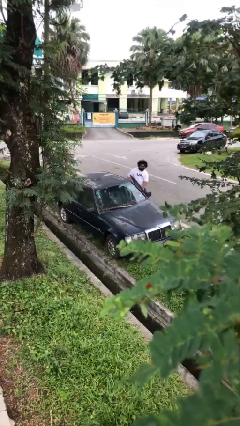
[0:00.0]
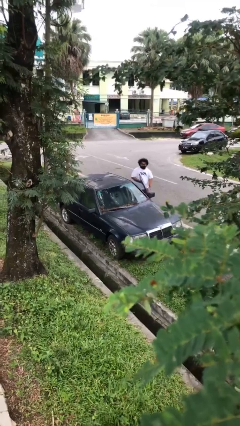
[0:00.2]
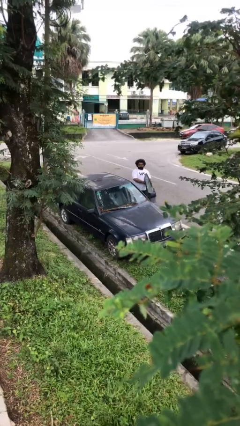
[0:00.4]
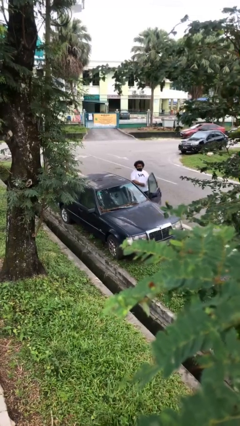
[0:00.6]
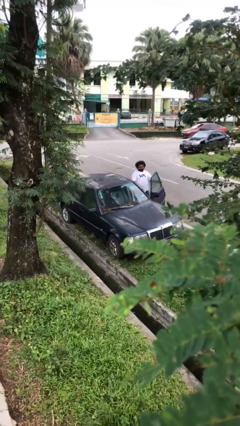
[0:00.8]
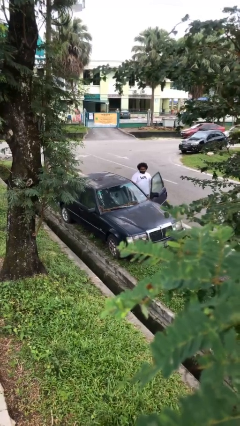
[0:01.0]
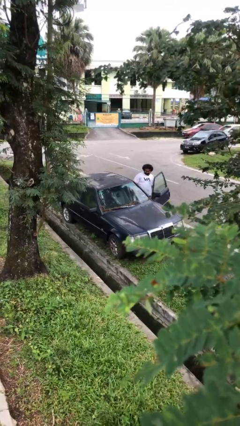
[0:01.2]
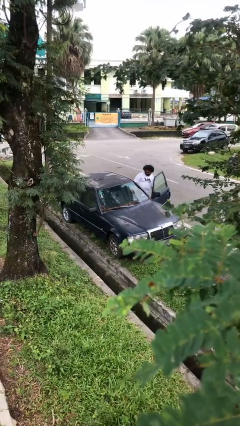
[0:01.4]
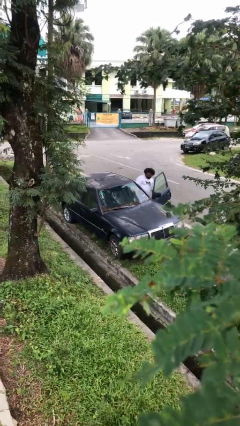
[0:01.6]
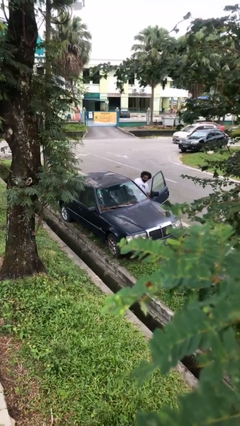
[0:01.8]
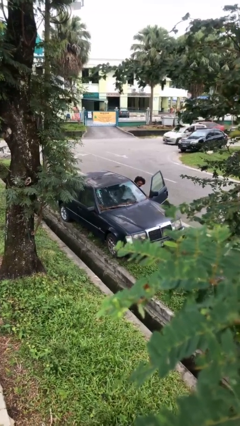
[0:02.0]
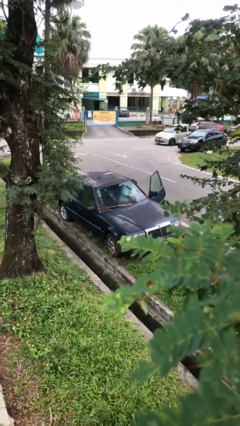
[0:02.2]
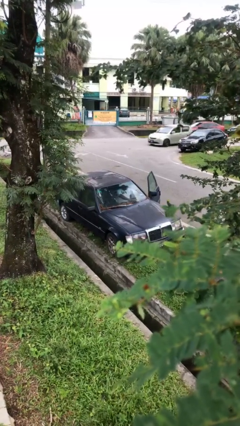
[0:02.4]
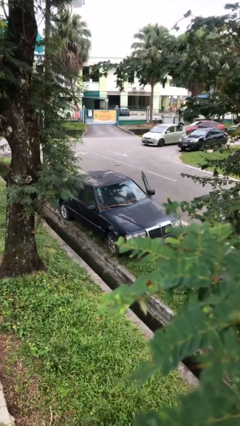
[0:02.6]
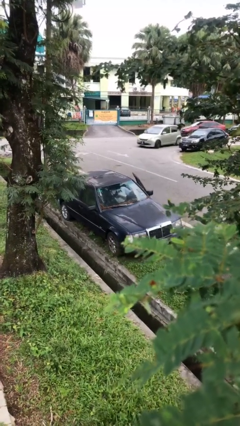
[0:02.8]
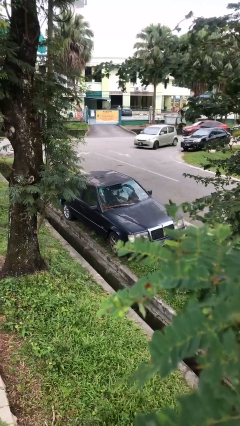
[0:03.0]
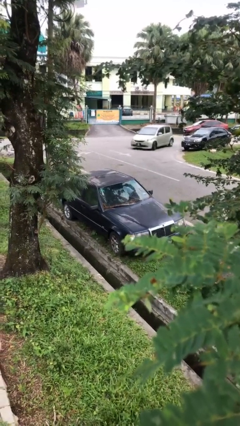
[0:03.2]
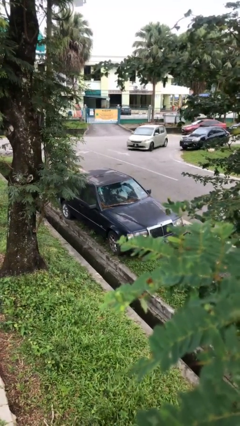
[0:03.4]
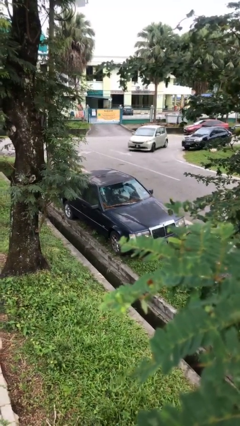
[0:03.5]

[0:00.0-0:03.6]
car picks up person

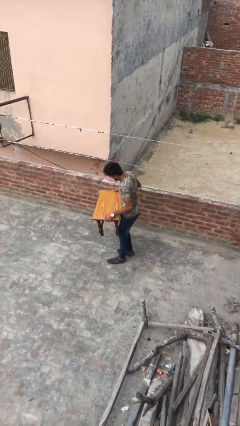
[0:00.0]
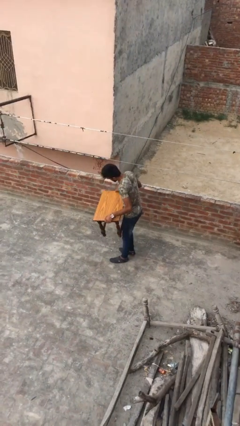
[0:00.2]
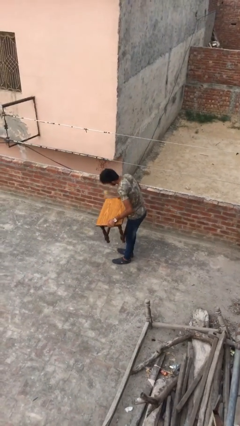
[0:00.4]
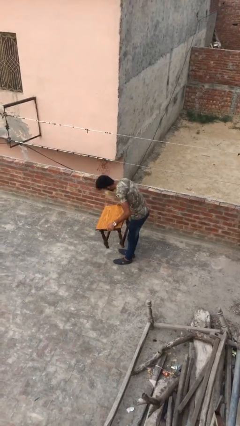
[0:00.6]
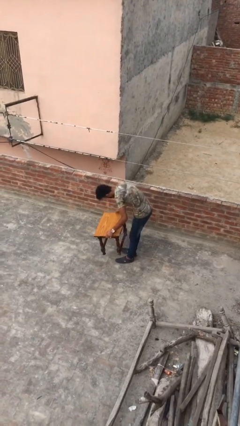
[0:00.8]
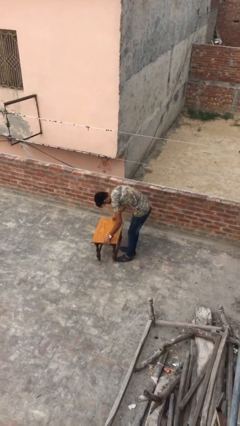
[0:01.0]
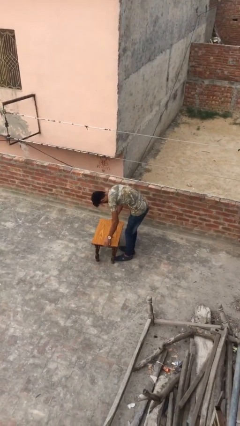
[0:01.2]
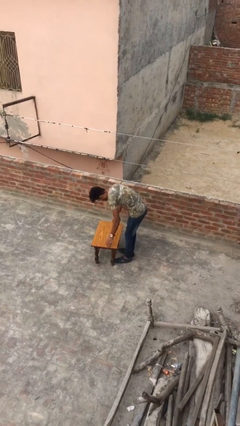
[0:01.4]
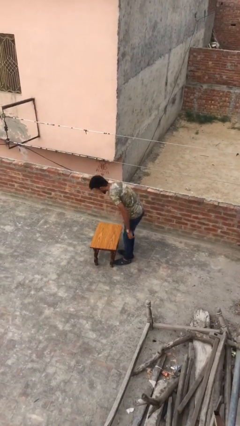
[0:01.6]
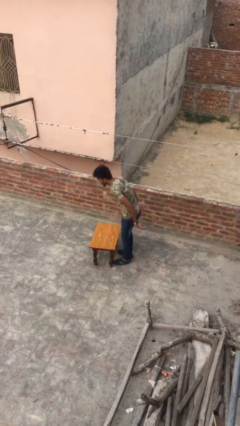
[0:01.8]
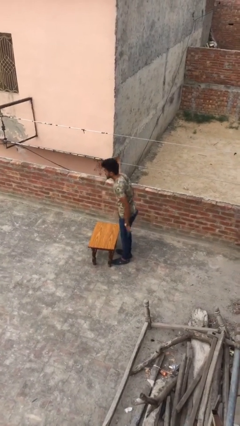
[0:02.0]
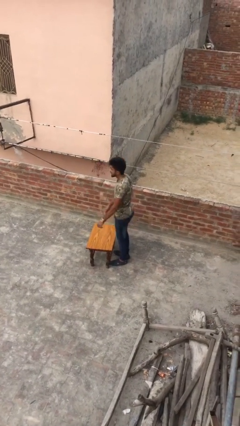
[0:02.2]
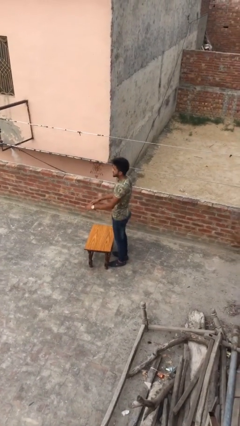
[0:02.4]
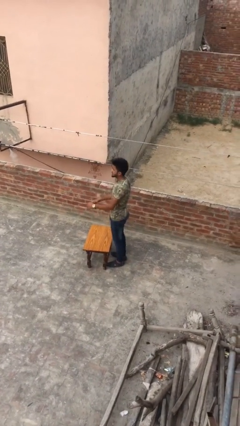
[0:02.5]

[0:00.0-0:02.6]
person puts down object on floor

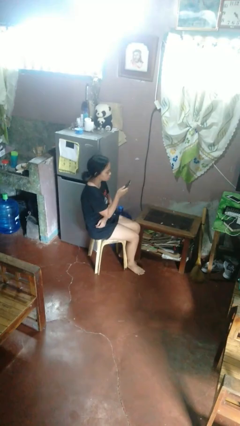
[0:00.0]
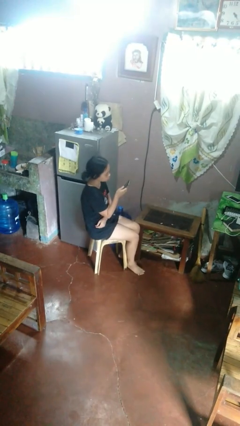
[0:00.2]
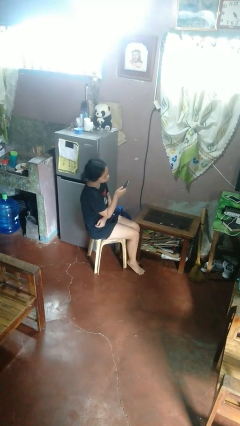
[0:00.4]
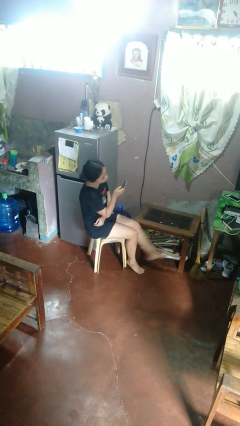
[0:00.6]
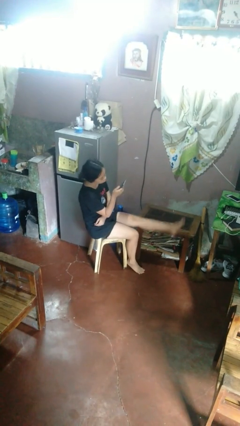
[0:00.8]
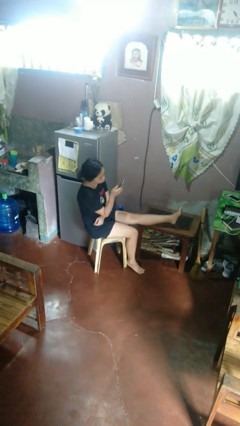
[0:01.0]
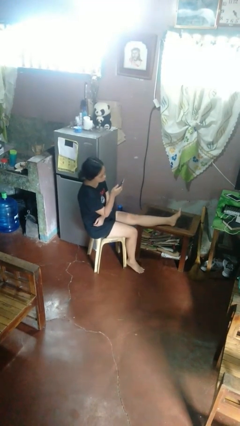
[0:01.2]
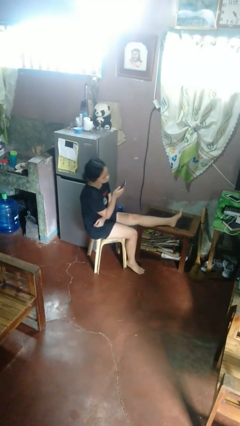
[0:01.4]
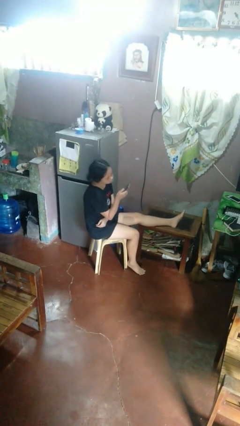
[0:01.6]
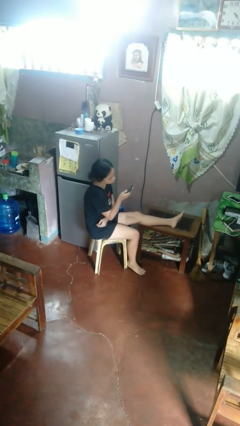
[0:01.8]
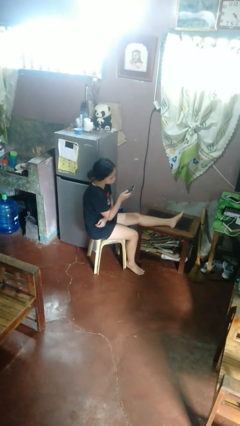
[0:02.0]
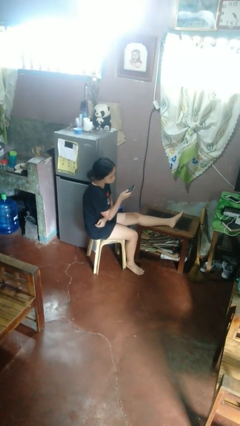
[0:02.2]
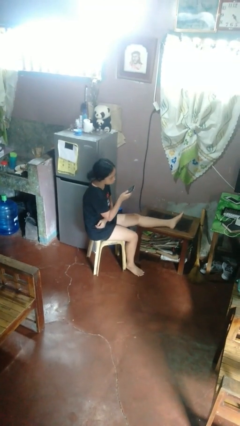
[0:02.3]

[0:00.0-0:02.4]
person puts feet up

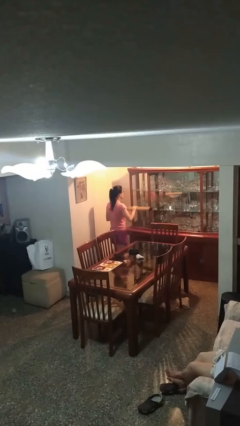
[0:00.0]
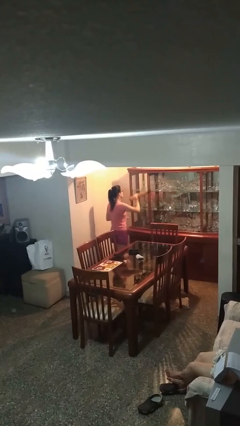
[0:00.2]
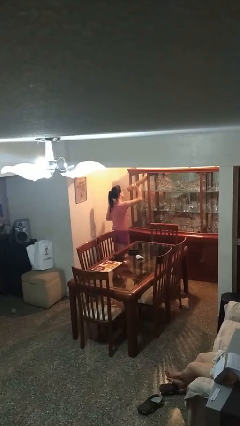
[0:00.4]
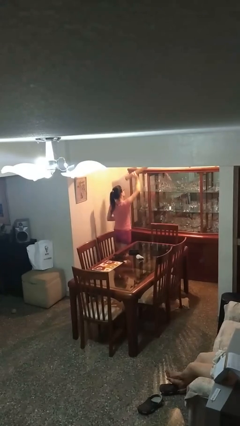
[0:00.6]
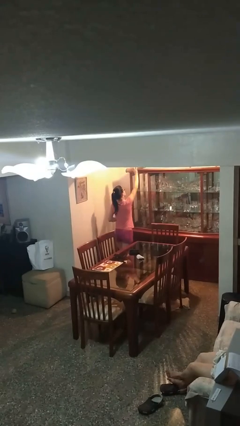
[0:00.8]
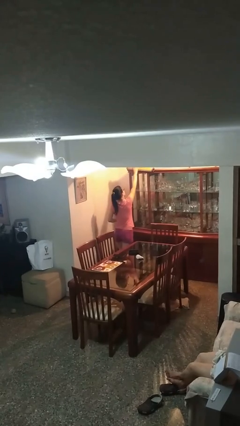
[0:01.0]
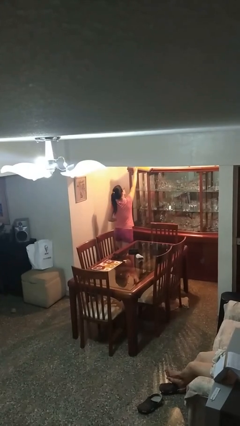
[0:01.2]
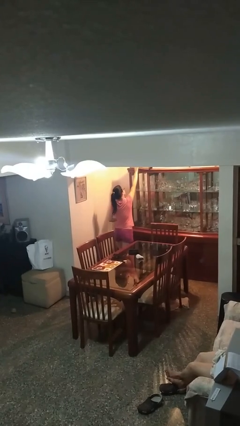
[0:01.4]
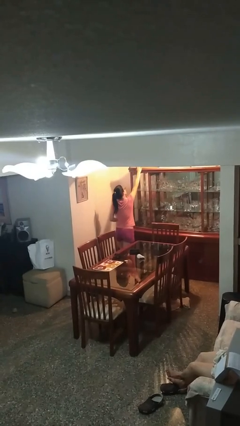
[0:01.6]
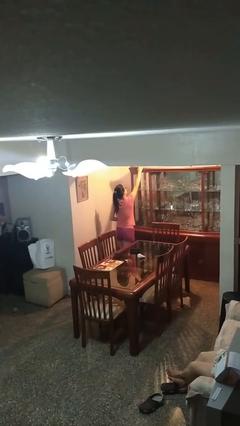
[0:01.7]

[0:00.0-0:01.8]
person puts down object on shelf

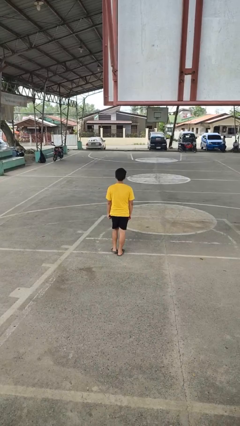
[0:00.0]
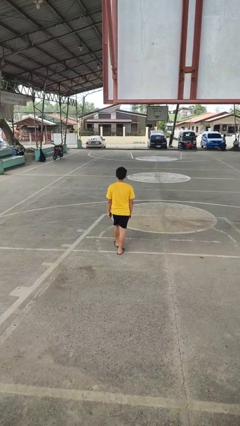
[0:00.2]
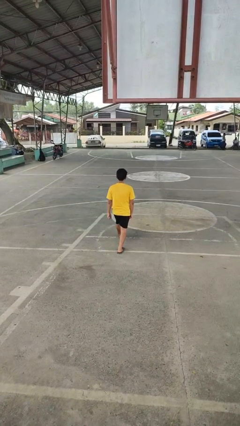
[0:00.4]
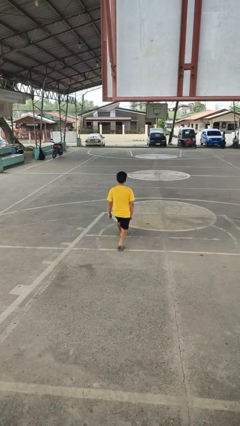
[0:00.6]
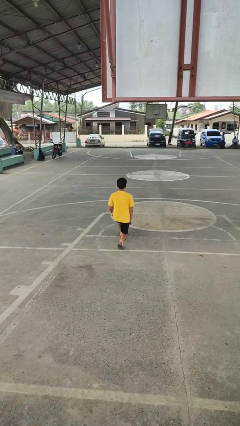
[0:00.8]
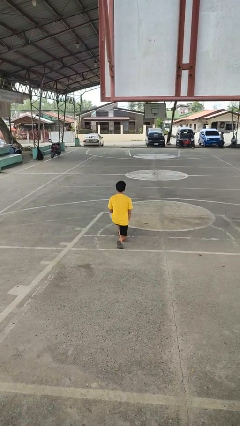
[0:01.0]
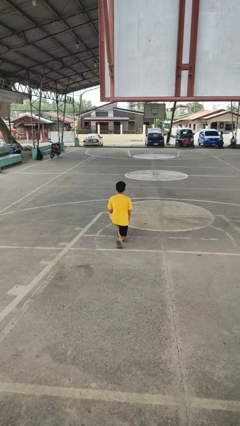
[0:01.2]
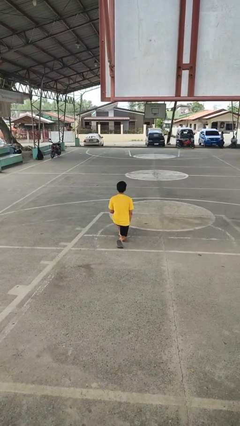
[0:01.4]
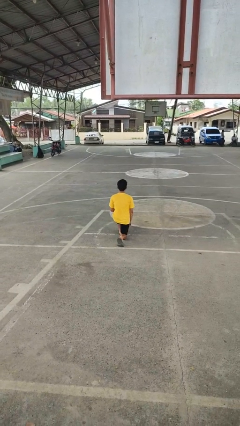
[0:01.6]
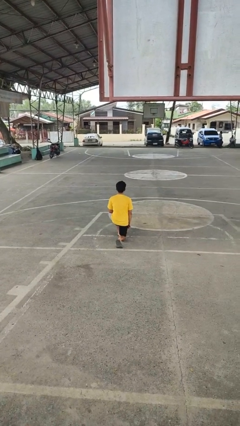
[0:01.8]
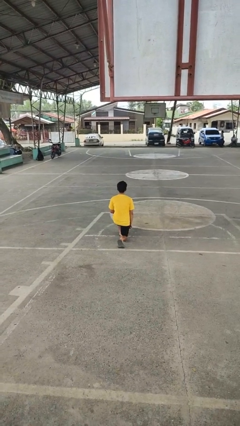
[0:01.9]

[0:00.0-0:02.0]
person kneels

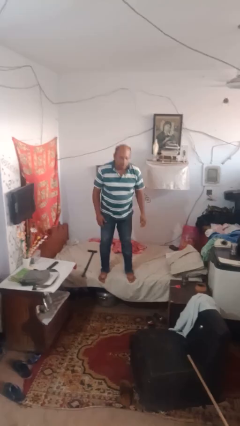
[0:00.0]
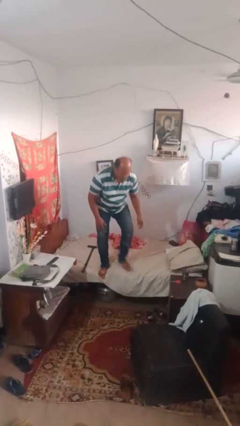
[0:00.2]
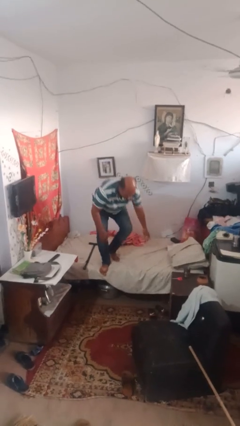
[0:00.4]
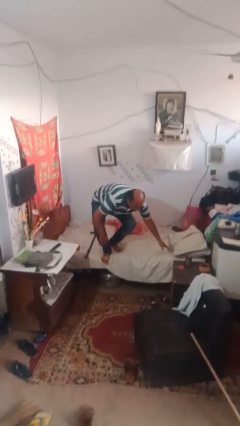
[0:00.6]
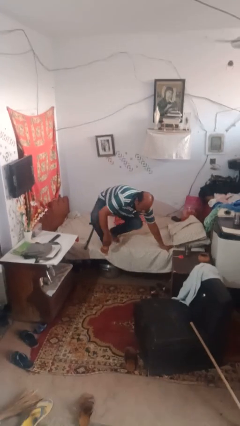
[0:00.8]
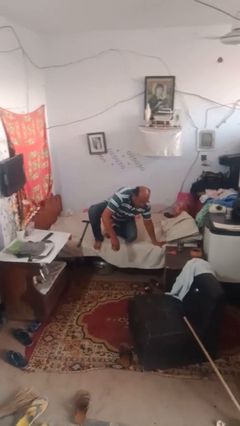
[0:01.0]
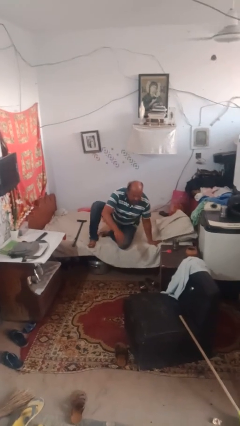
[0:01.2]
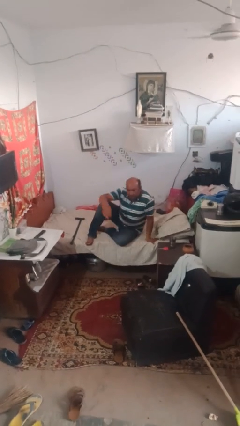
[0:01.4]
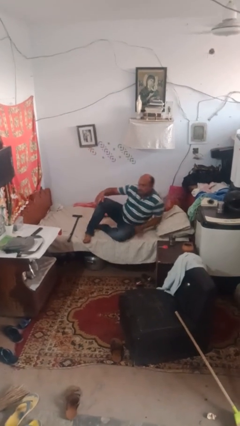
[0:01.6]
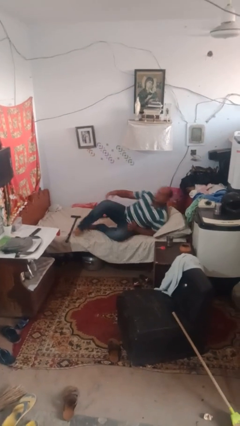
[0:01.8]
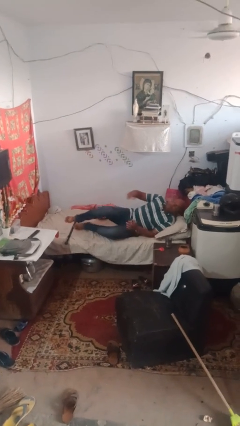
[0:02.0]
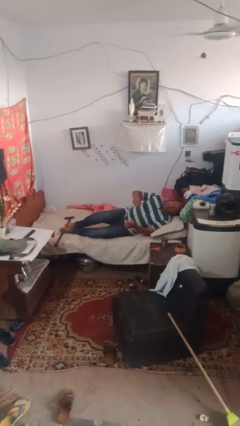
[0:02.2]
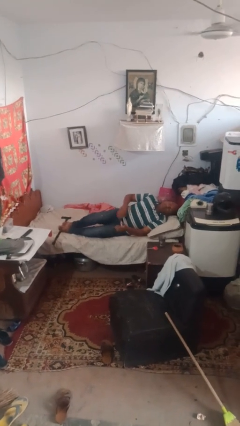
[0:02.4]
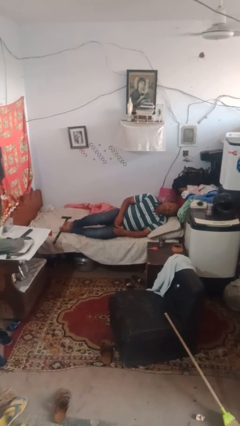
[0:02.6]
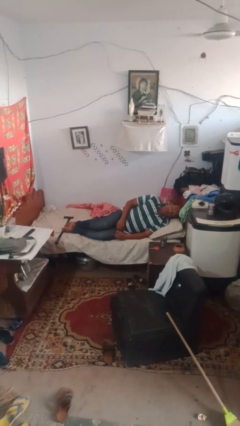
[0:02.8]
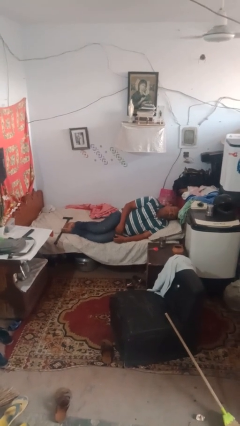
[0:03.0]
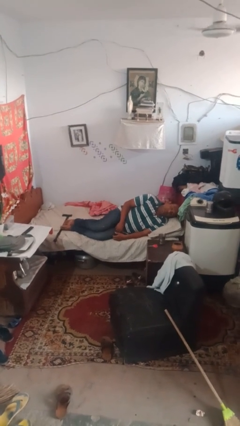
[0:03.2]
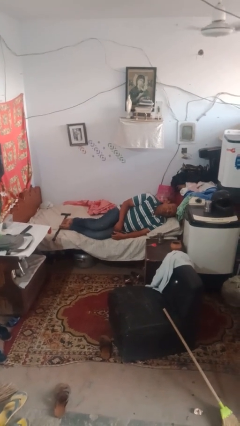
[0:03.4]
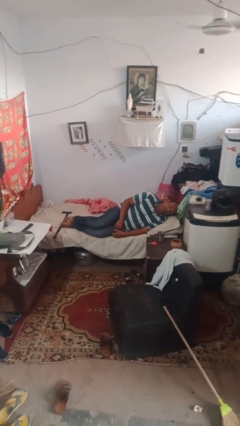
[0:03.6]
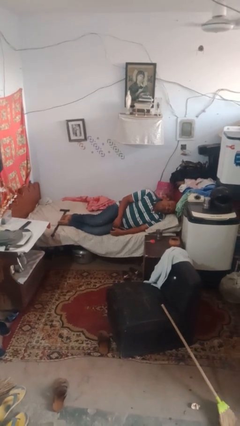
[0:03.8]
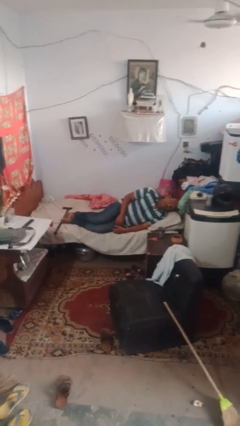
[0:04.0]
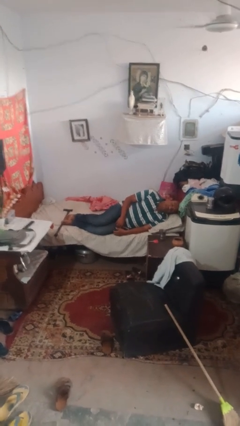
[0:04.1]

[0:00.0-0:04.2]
person lies down on bed

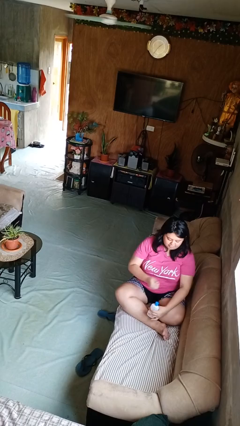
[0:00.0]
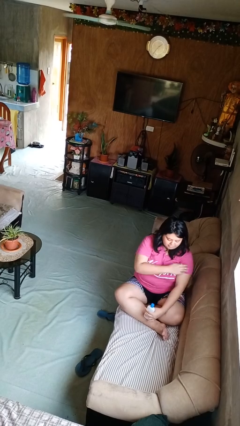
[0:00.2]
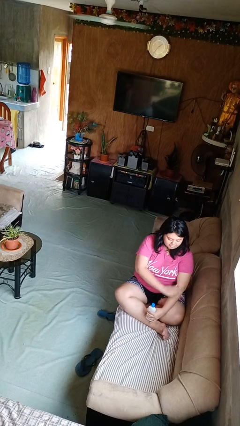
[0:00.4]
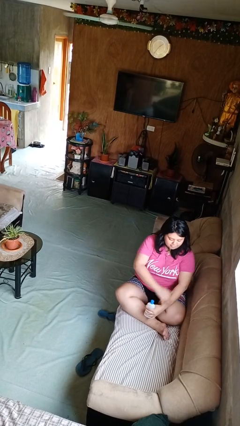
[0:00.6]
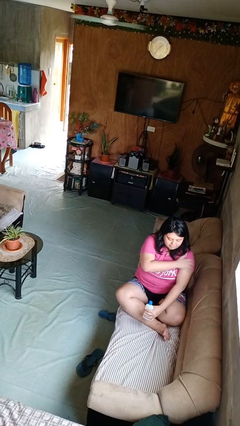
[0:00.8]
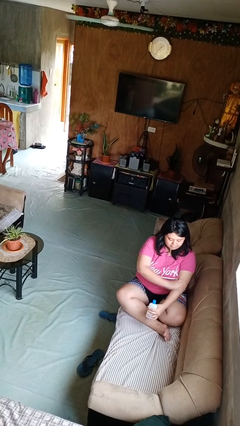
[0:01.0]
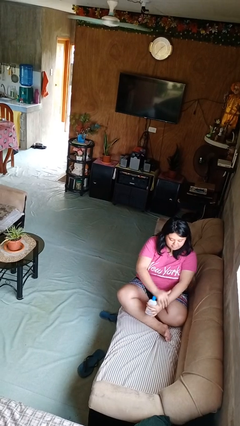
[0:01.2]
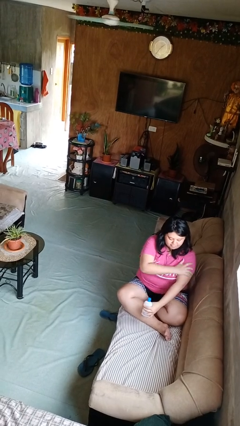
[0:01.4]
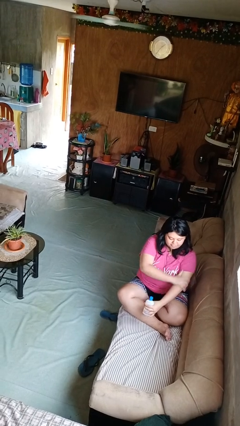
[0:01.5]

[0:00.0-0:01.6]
person applies sunscreen
